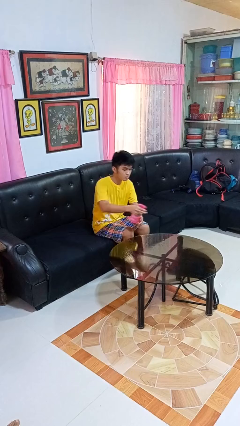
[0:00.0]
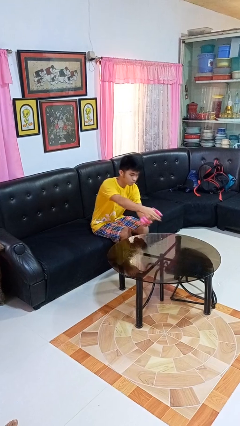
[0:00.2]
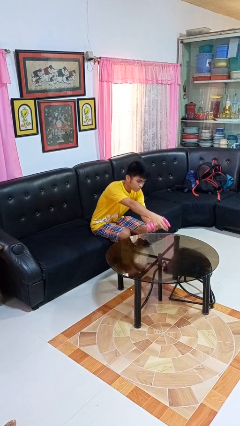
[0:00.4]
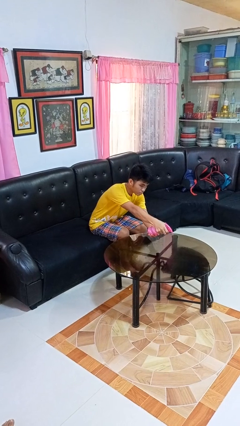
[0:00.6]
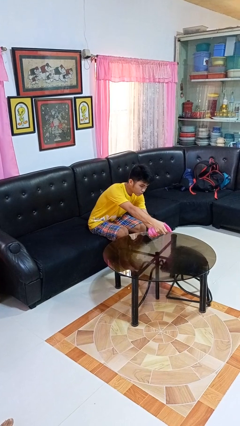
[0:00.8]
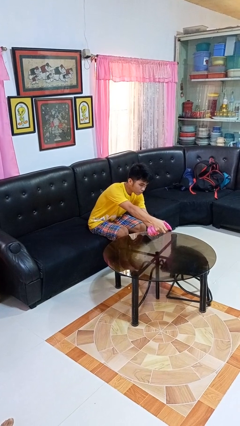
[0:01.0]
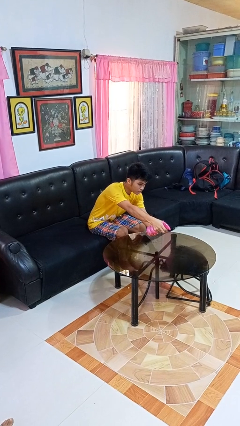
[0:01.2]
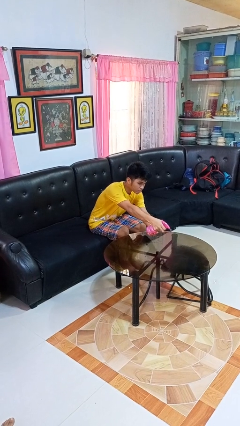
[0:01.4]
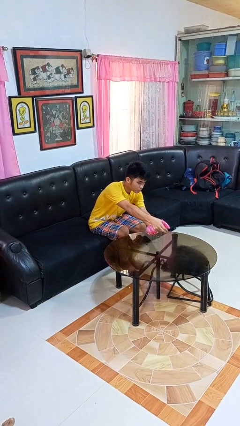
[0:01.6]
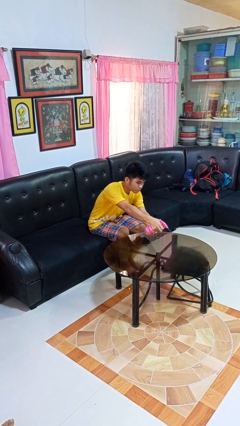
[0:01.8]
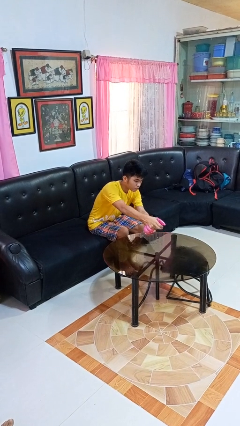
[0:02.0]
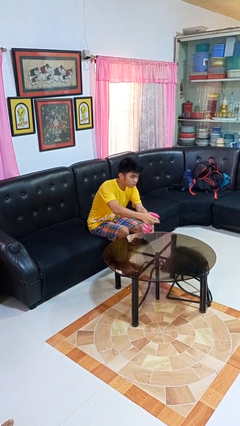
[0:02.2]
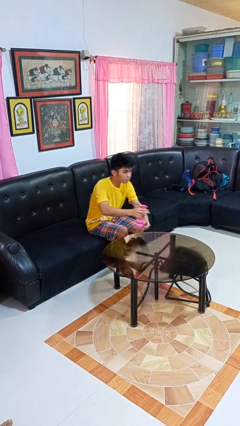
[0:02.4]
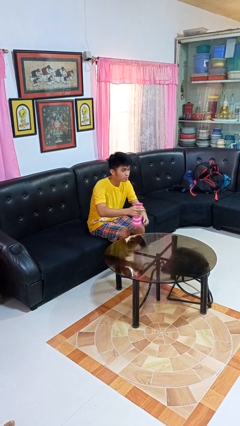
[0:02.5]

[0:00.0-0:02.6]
person sprays from bottle

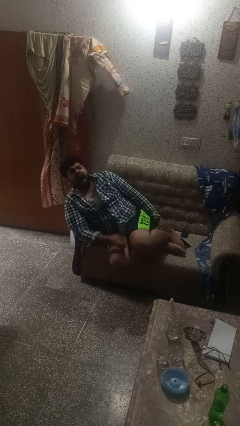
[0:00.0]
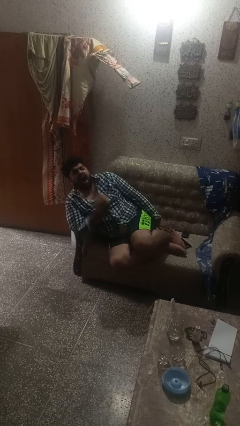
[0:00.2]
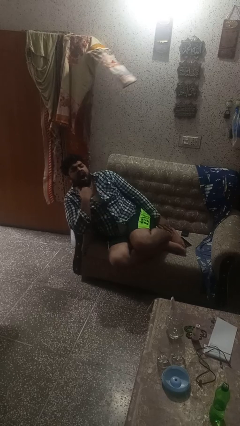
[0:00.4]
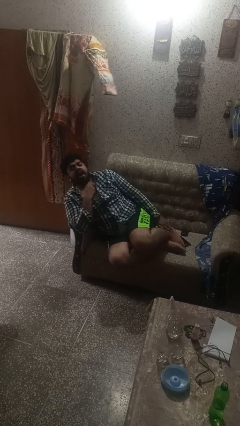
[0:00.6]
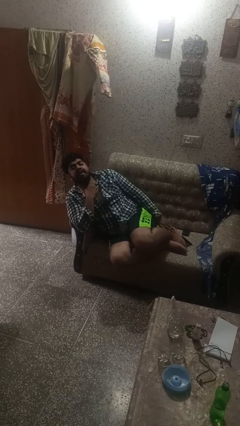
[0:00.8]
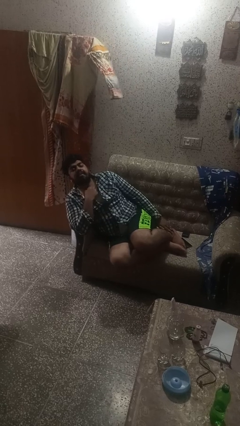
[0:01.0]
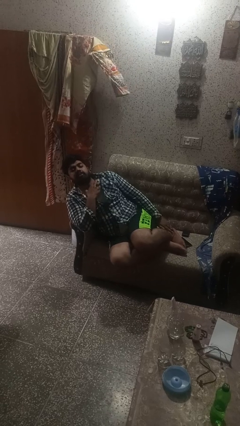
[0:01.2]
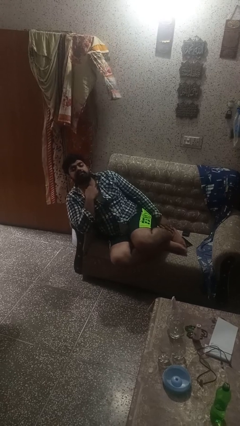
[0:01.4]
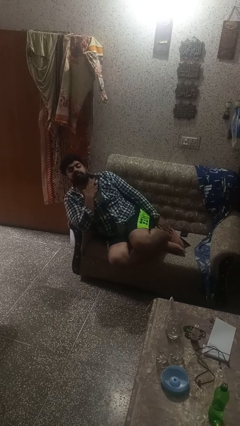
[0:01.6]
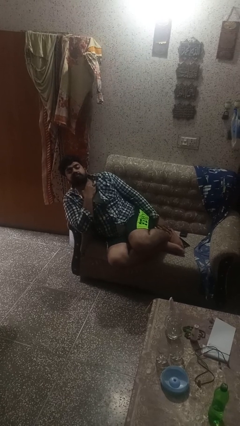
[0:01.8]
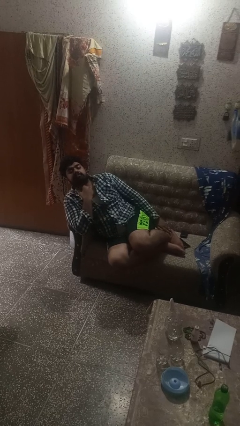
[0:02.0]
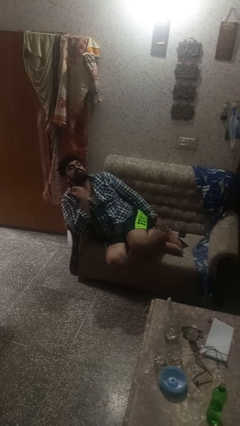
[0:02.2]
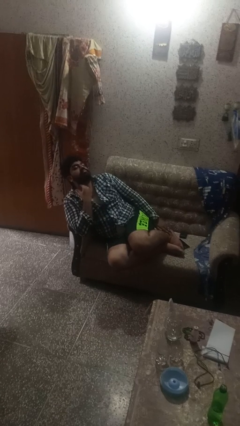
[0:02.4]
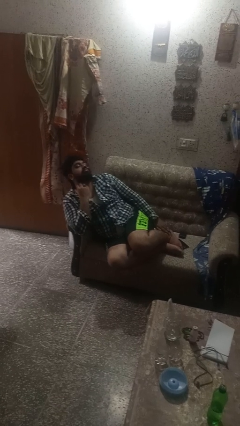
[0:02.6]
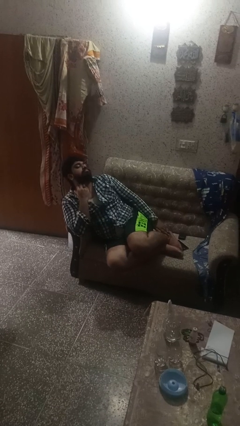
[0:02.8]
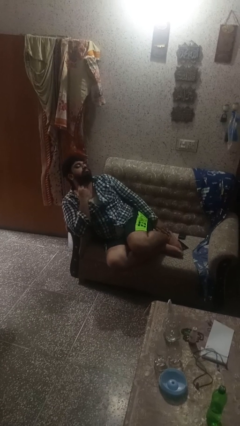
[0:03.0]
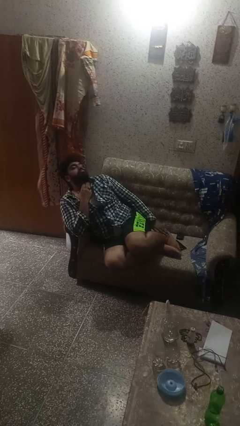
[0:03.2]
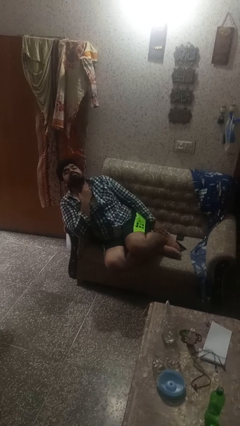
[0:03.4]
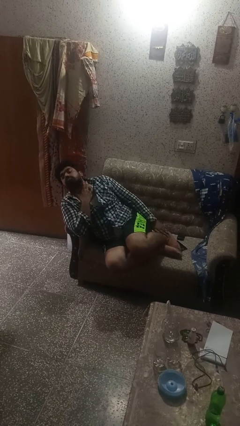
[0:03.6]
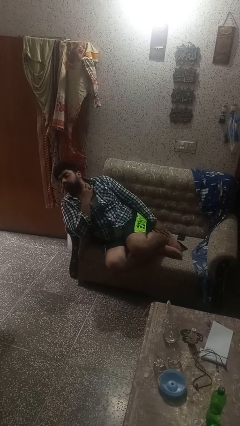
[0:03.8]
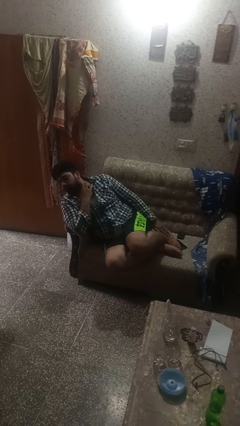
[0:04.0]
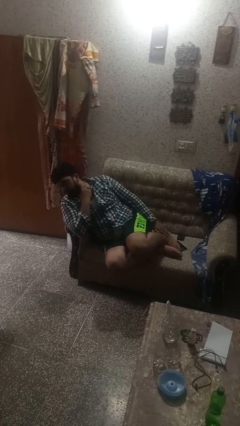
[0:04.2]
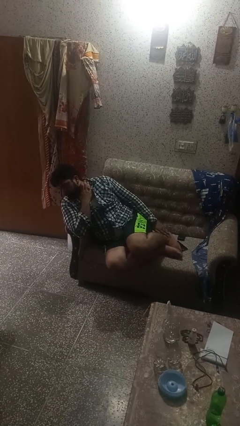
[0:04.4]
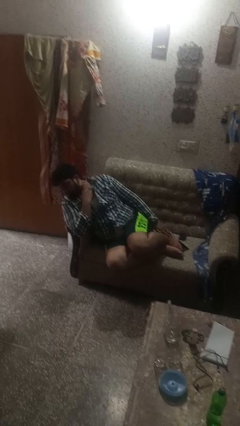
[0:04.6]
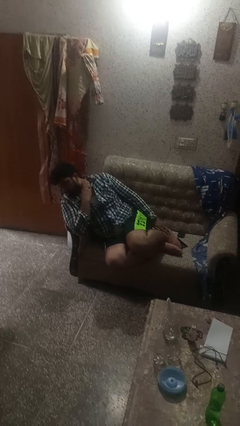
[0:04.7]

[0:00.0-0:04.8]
person rubs neck

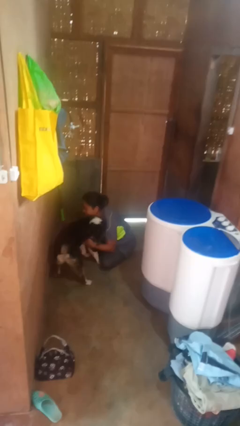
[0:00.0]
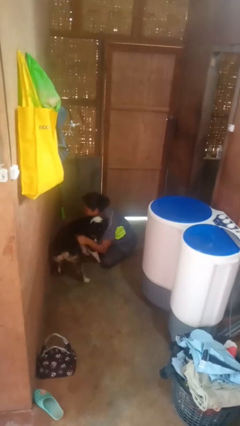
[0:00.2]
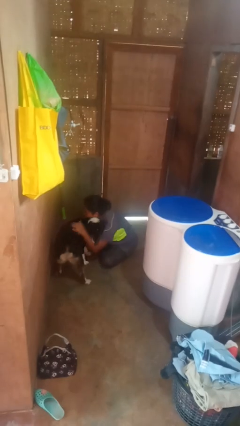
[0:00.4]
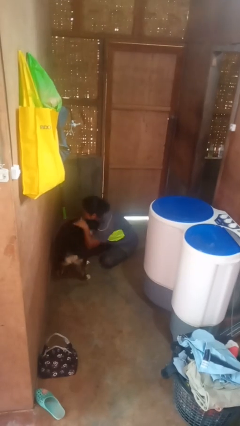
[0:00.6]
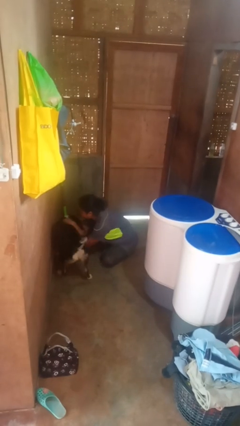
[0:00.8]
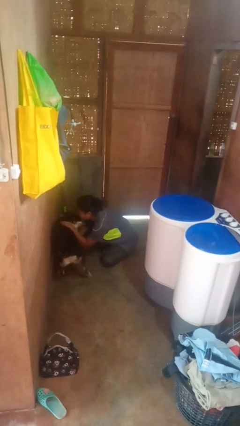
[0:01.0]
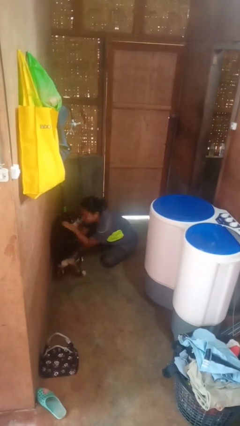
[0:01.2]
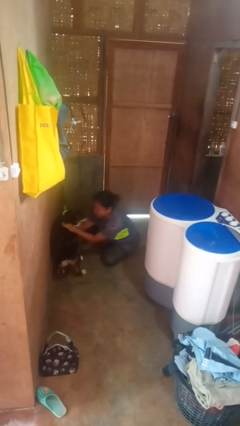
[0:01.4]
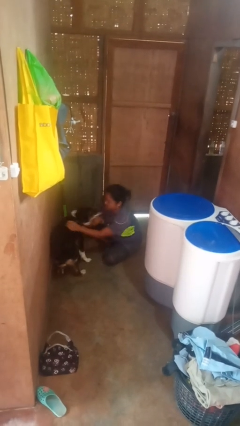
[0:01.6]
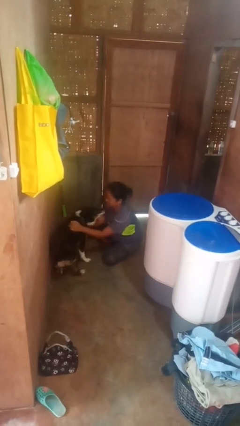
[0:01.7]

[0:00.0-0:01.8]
person hugs dog

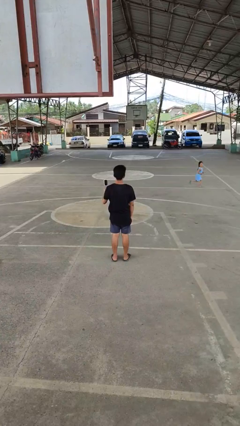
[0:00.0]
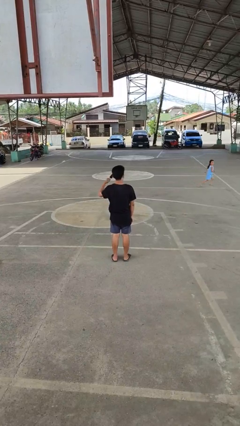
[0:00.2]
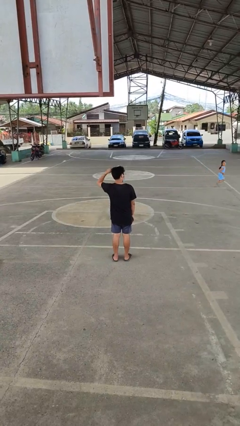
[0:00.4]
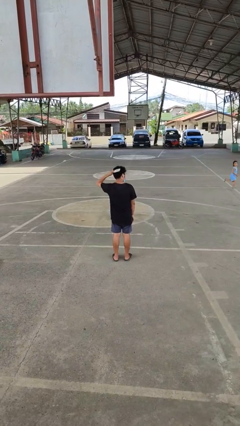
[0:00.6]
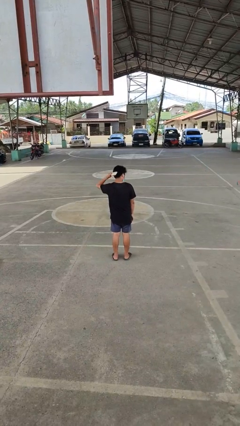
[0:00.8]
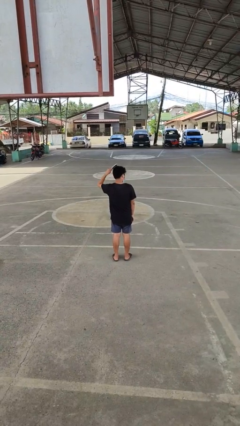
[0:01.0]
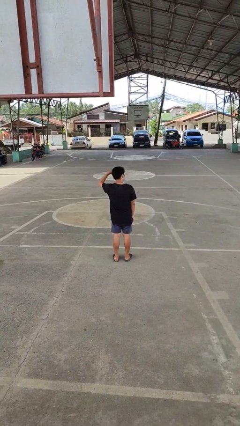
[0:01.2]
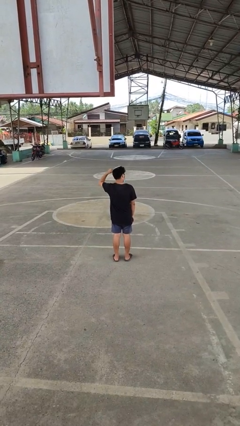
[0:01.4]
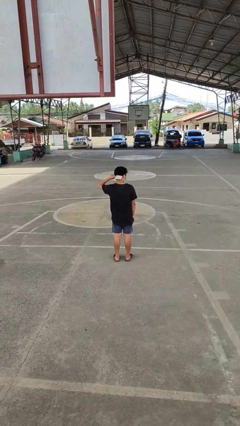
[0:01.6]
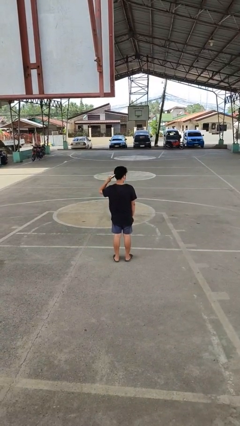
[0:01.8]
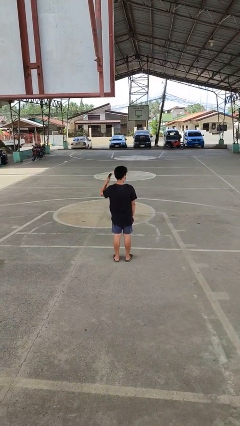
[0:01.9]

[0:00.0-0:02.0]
person brushes hair

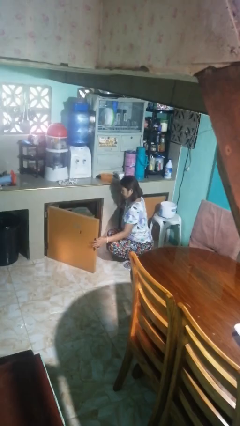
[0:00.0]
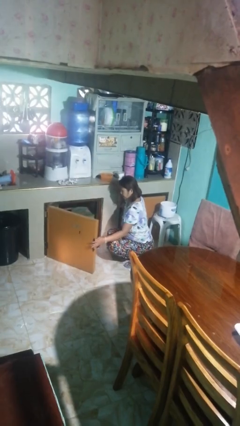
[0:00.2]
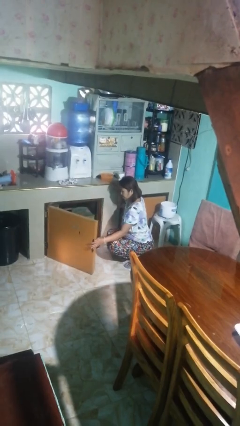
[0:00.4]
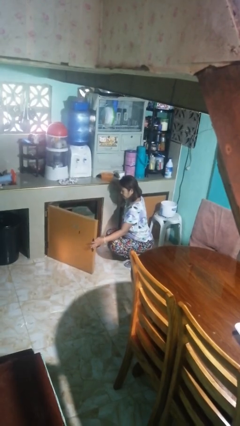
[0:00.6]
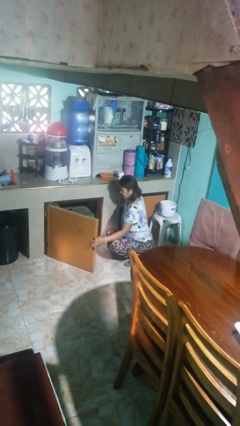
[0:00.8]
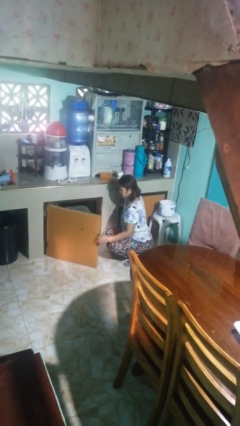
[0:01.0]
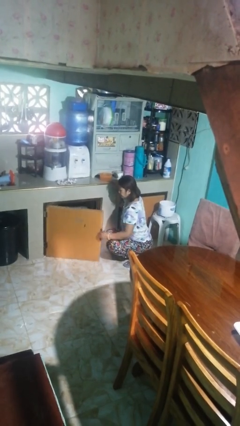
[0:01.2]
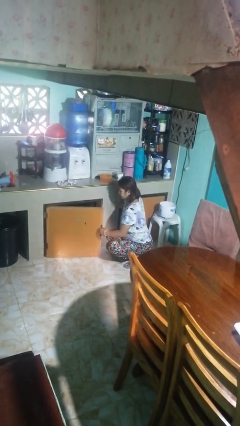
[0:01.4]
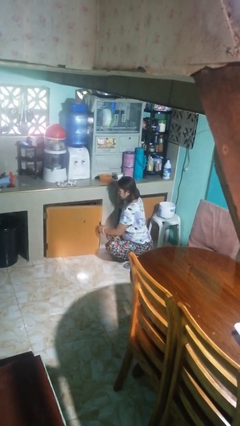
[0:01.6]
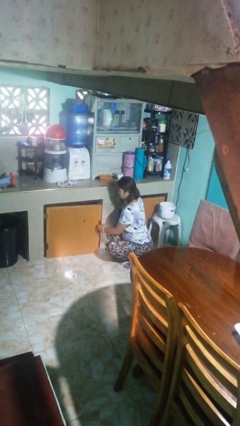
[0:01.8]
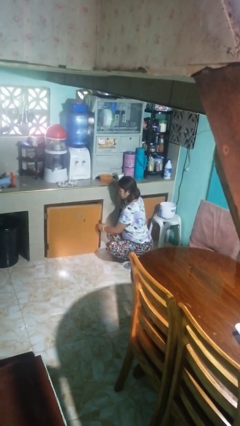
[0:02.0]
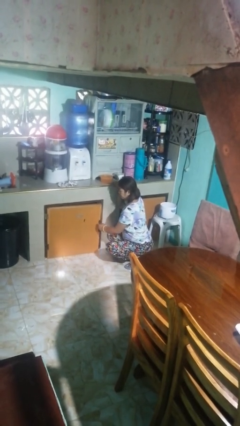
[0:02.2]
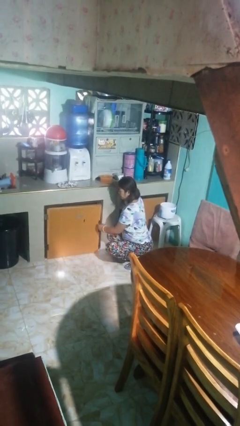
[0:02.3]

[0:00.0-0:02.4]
person closes cabinet

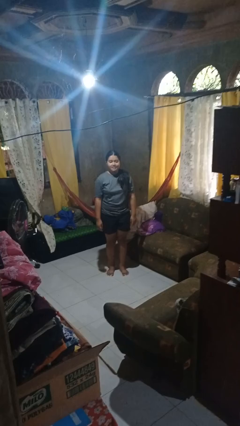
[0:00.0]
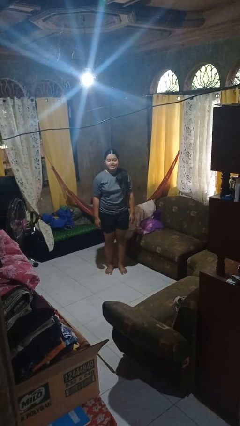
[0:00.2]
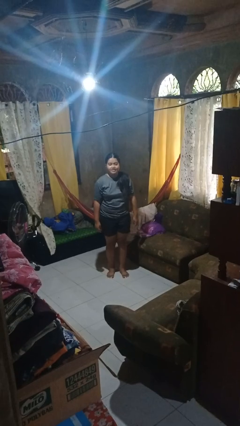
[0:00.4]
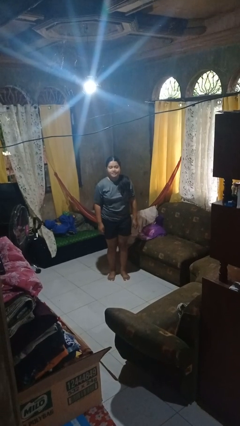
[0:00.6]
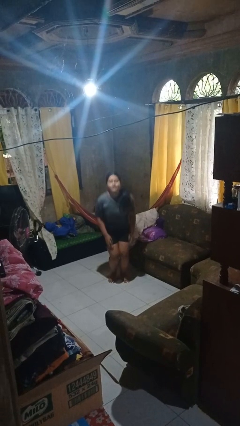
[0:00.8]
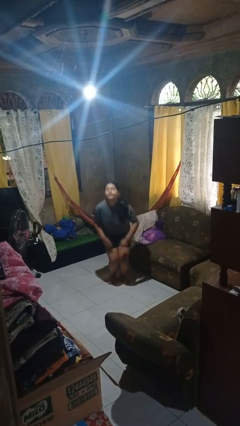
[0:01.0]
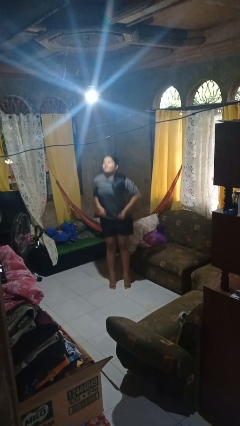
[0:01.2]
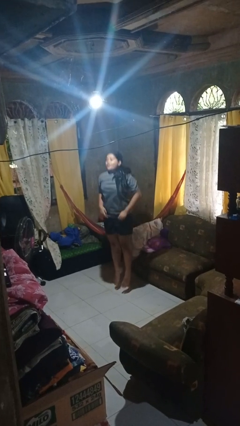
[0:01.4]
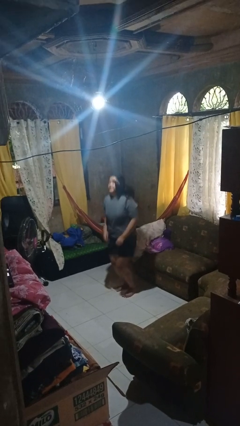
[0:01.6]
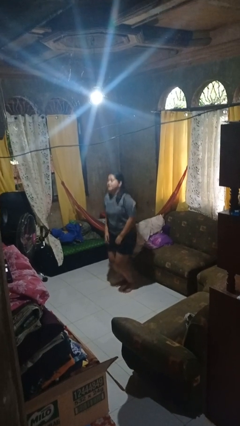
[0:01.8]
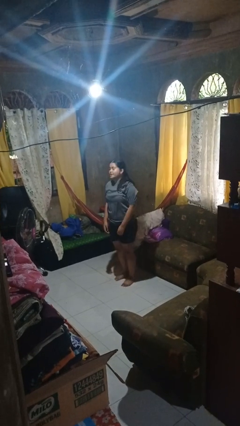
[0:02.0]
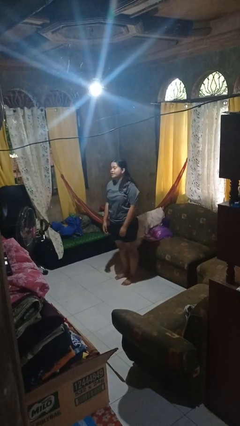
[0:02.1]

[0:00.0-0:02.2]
person jumps

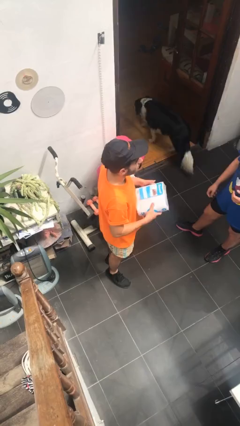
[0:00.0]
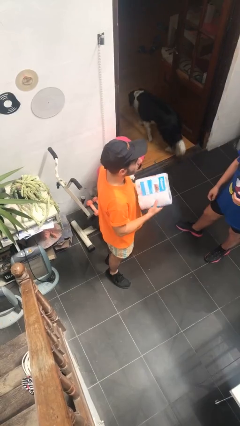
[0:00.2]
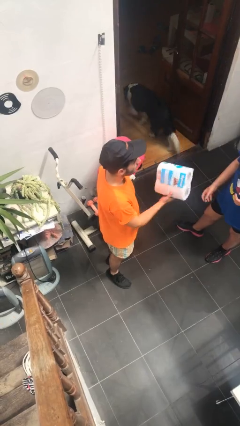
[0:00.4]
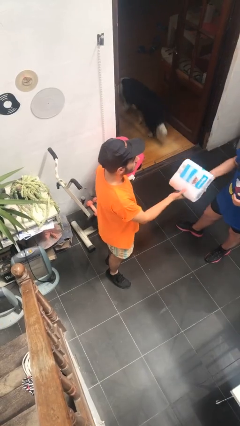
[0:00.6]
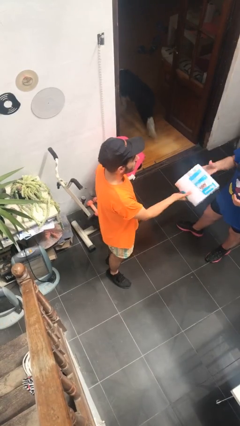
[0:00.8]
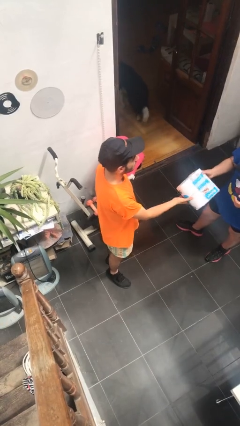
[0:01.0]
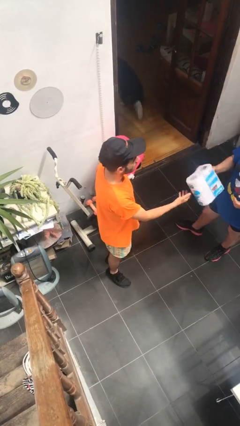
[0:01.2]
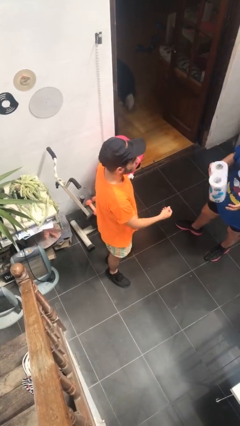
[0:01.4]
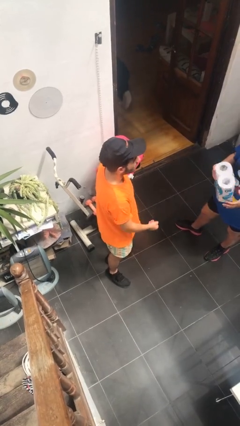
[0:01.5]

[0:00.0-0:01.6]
person transfers object to person
